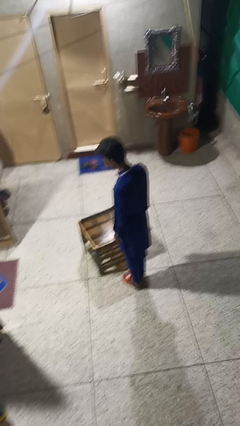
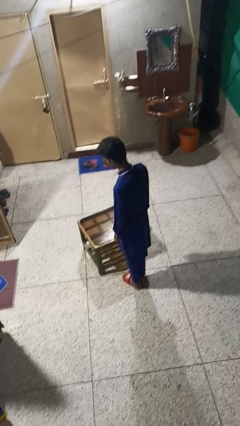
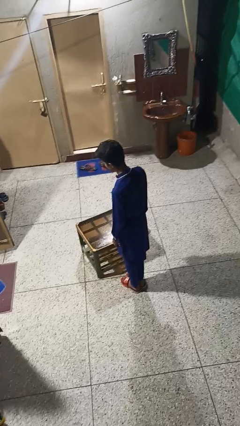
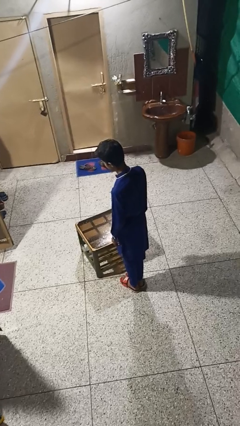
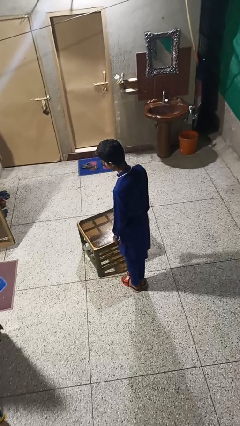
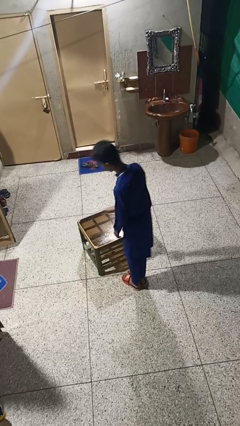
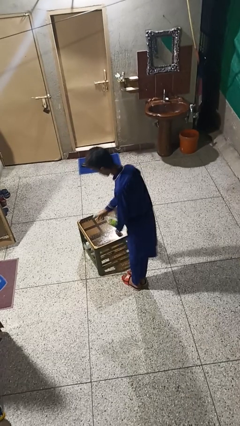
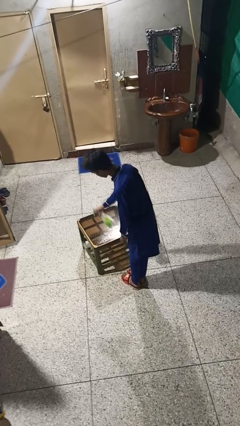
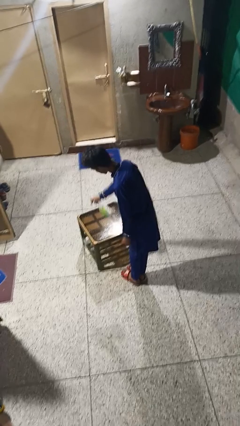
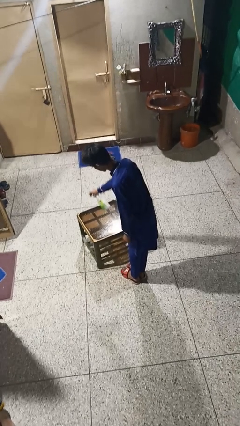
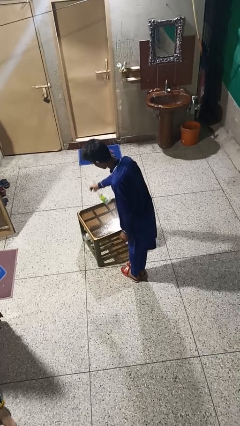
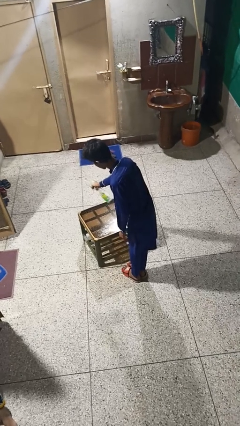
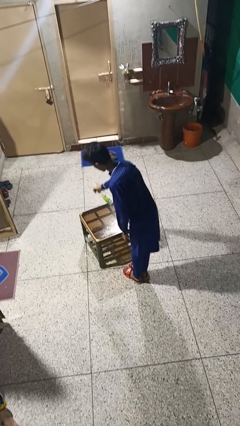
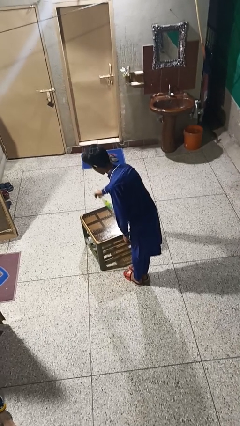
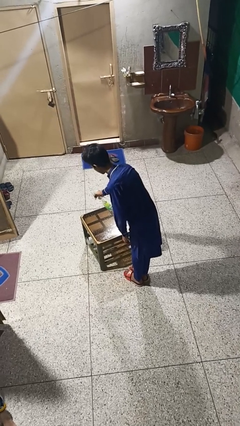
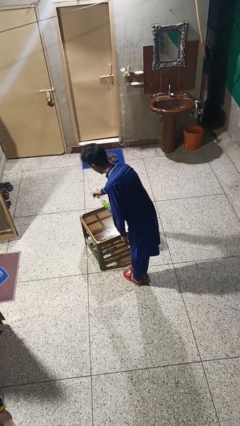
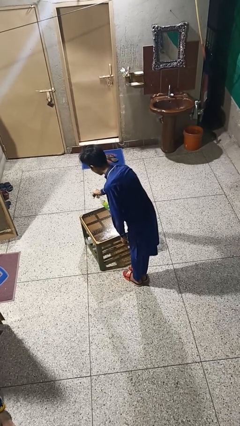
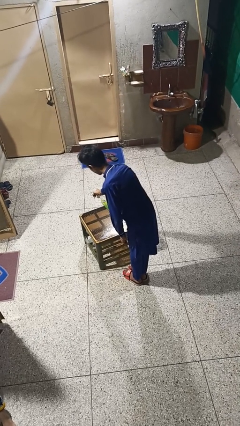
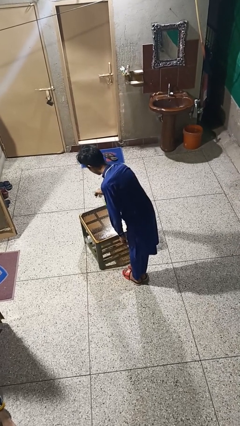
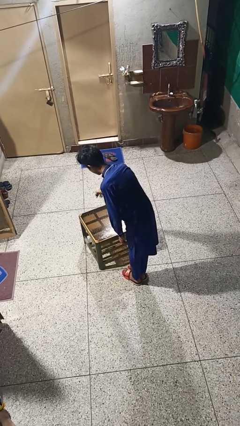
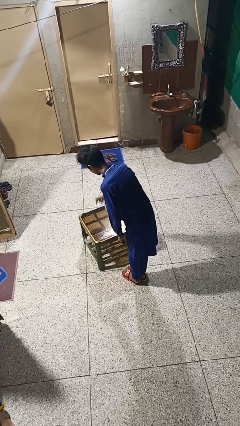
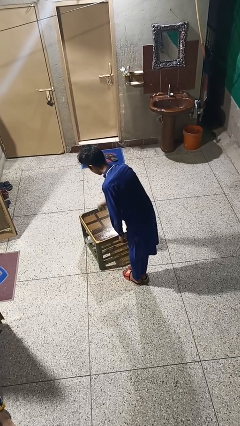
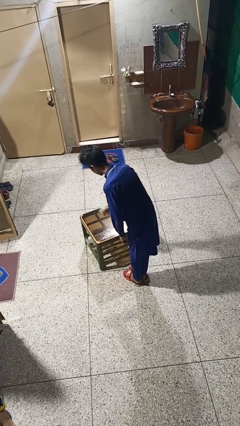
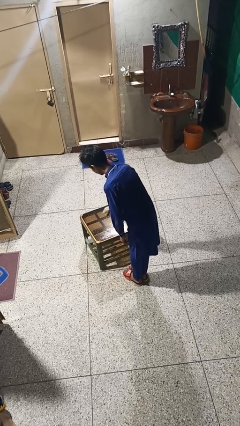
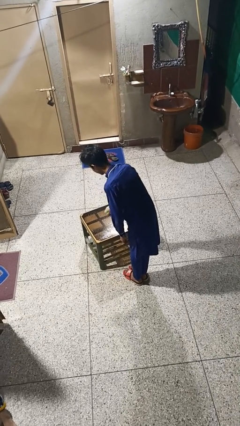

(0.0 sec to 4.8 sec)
person sprays from bottle

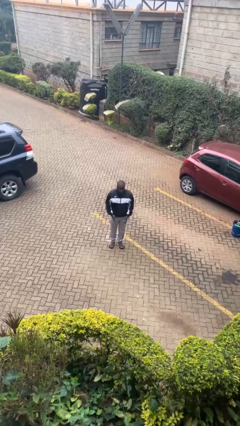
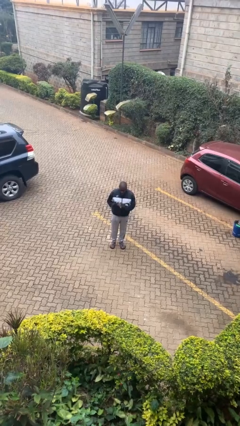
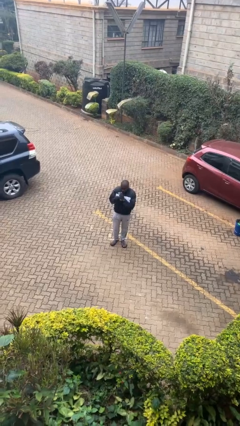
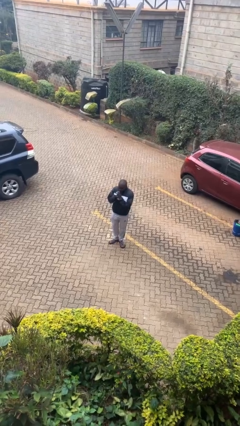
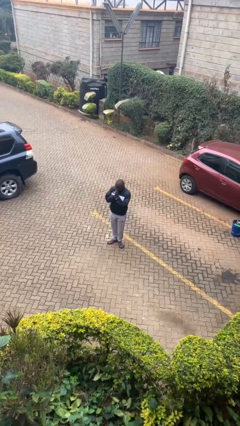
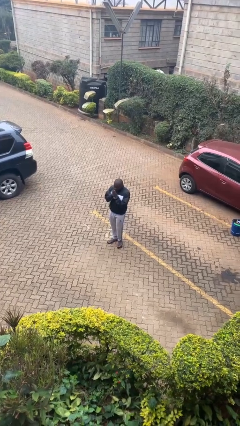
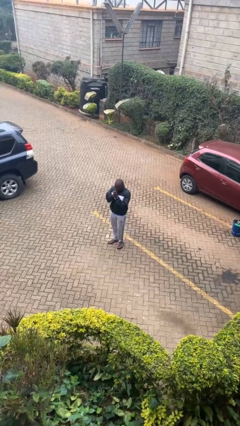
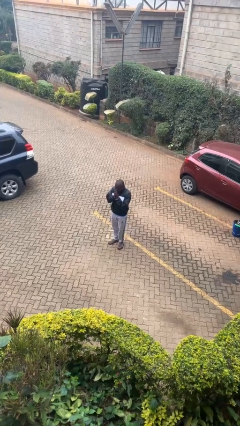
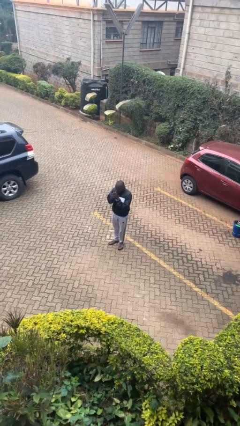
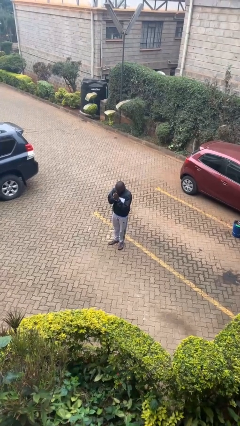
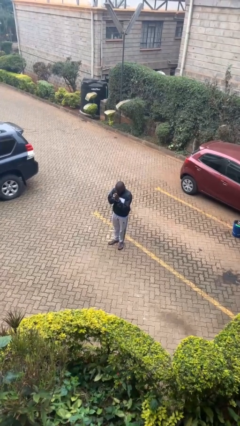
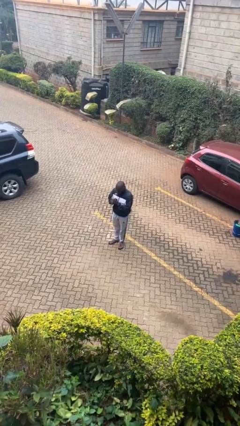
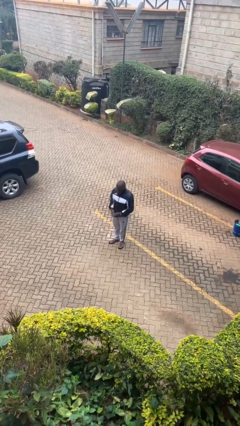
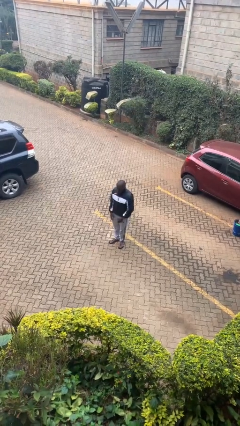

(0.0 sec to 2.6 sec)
person blows into hands

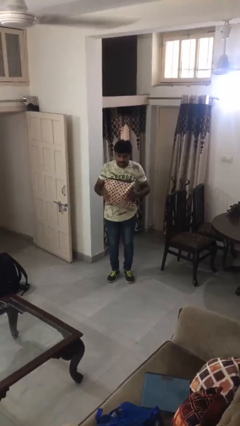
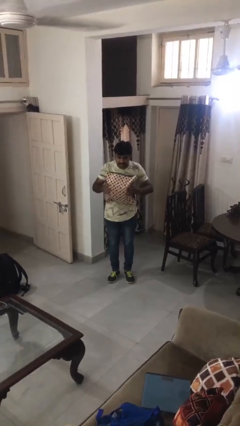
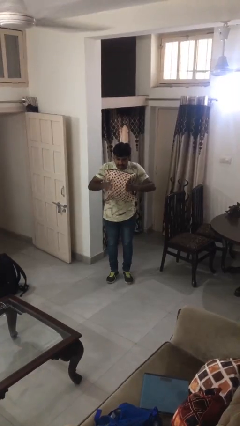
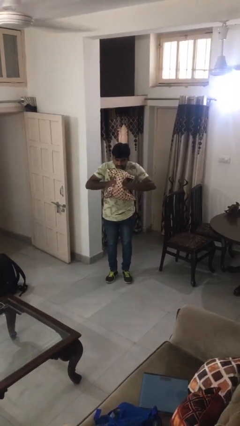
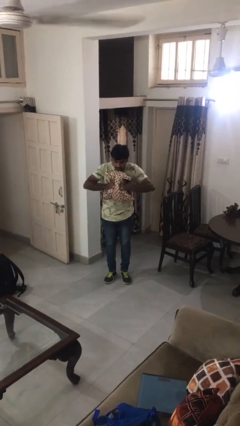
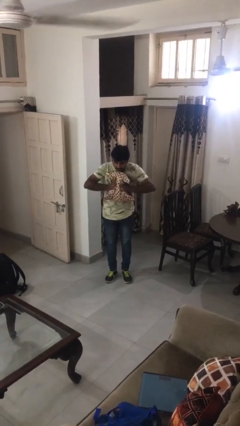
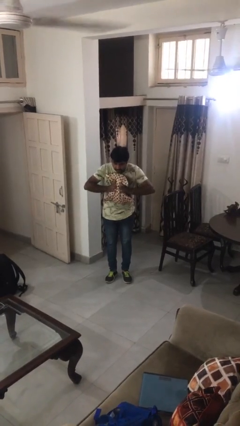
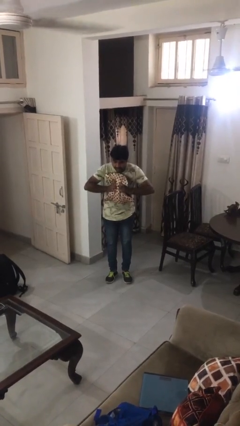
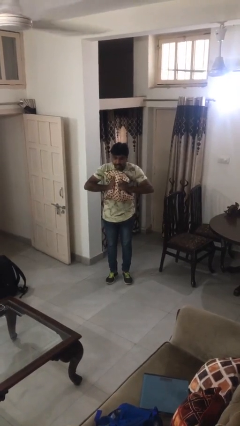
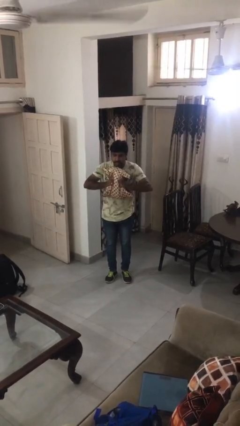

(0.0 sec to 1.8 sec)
person squeezes object

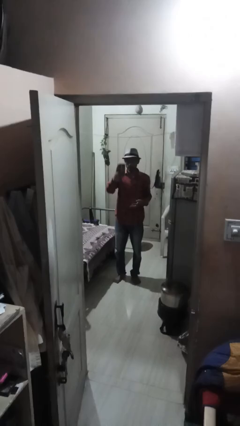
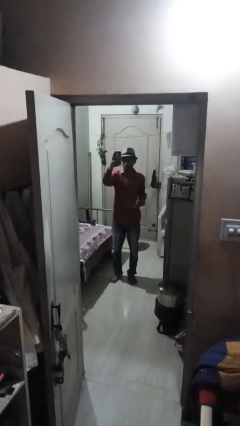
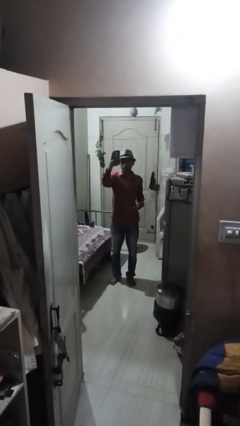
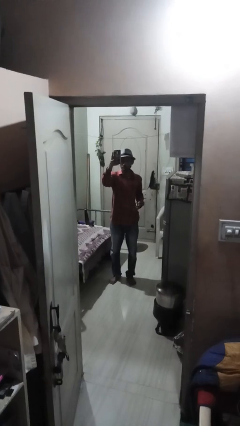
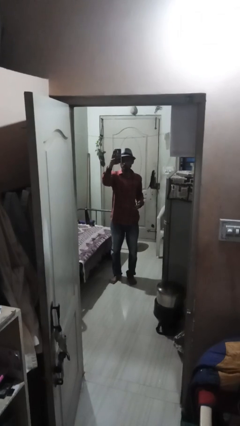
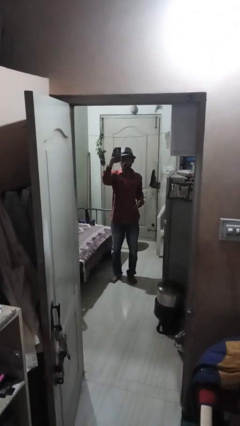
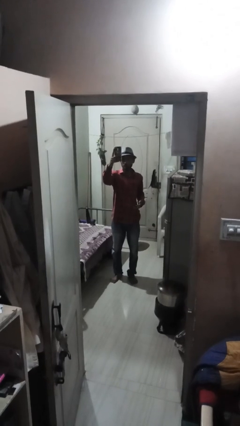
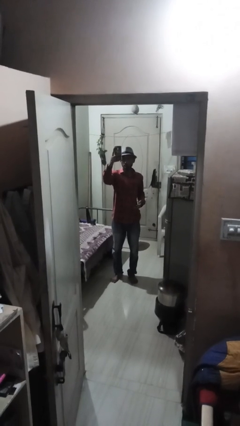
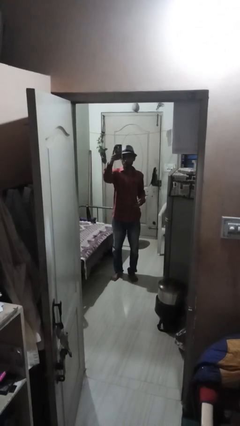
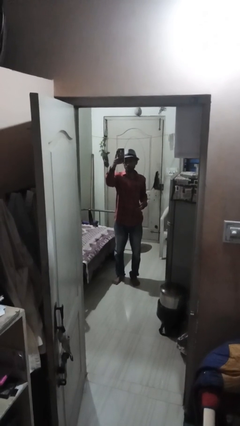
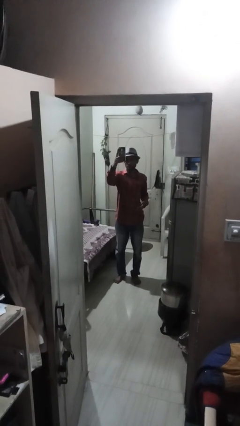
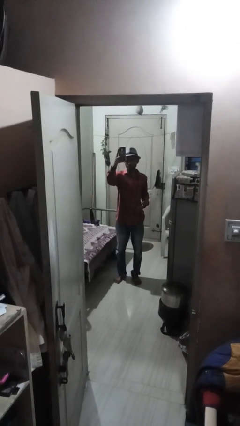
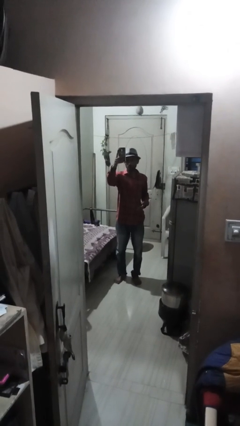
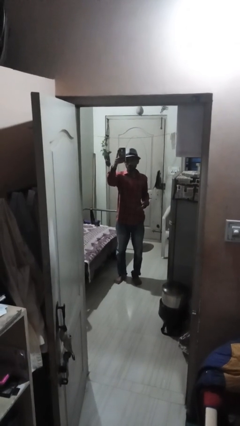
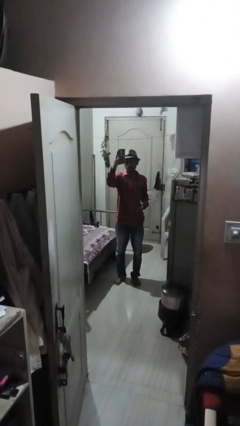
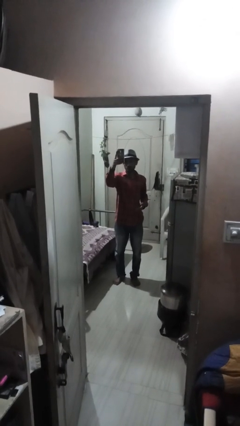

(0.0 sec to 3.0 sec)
person takes selfie

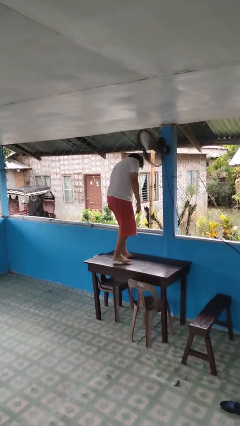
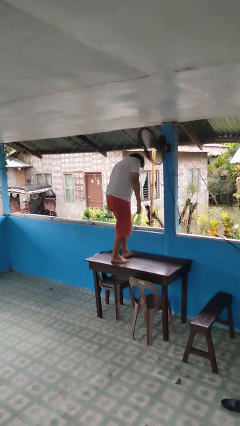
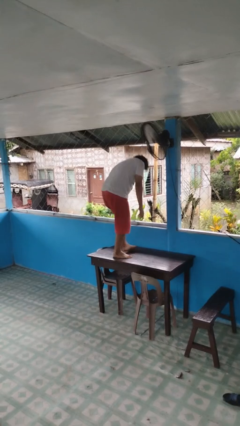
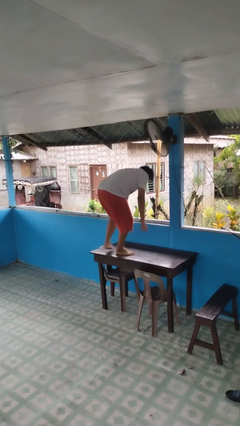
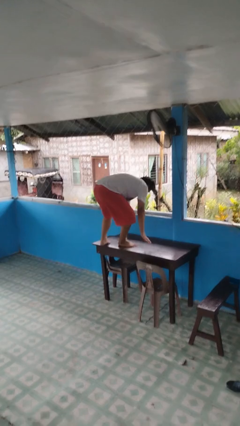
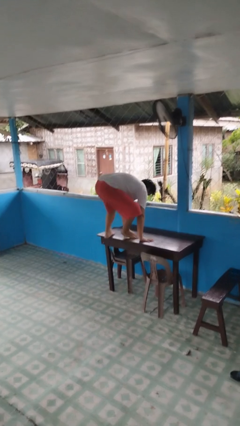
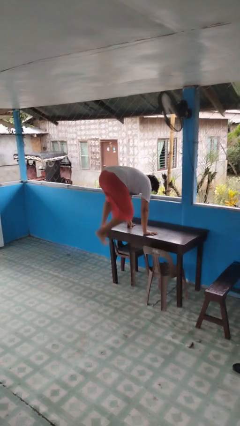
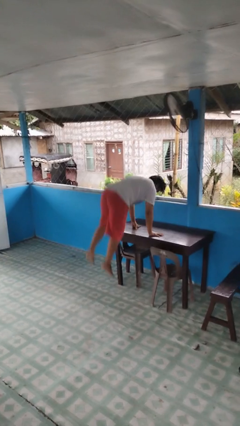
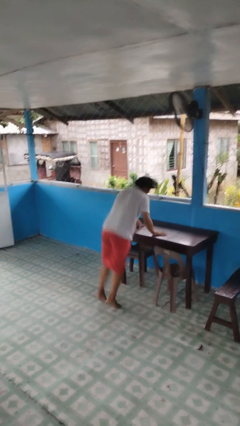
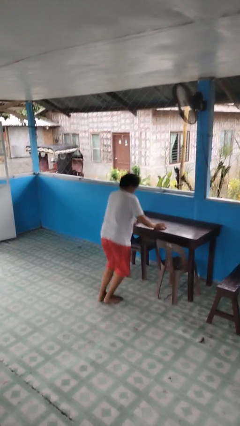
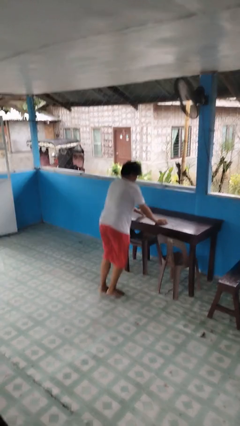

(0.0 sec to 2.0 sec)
person climbs off table

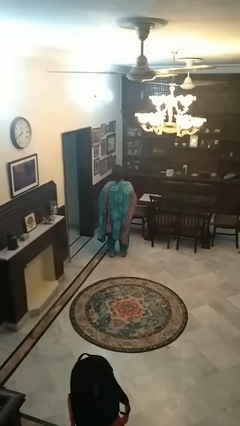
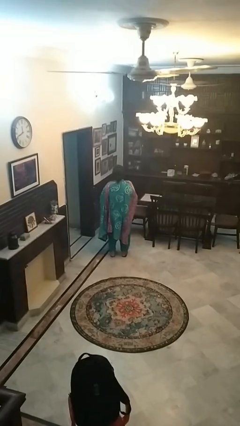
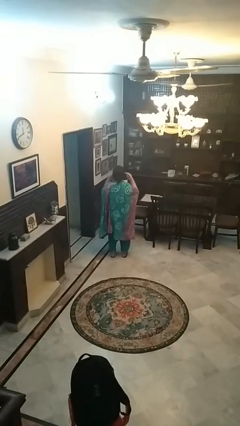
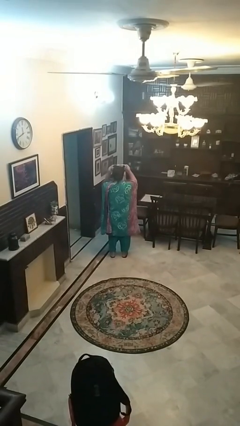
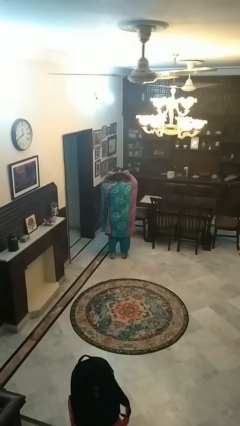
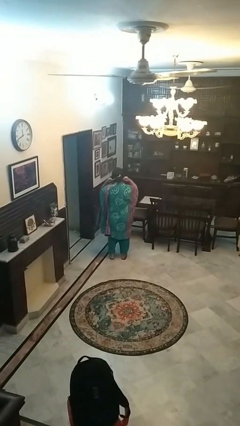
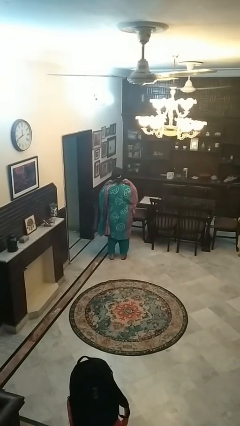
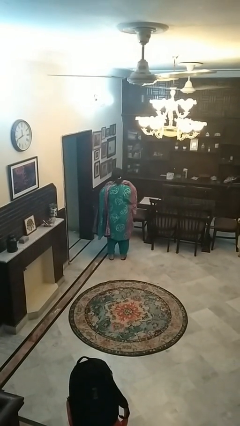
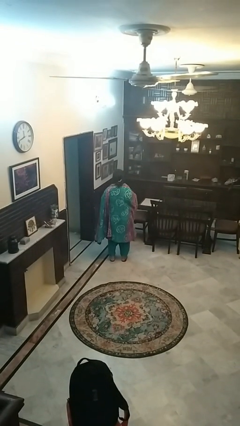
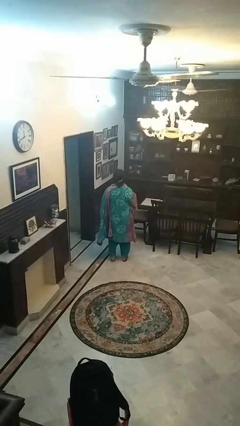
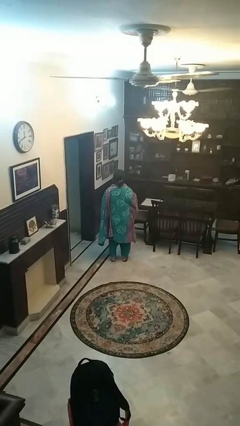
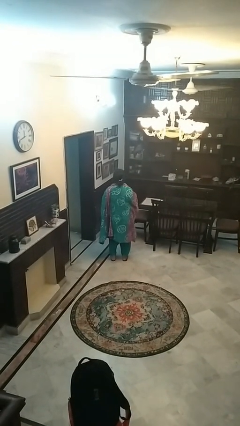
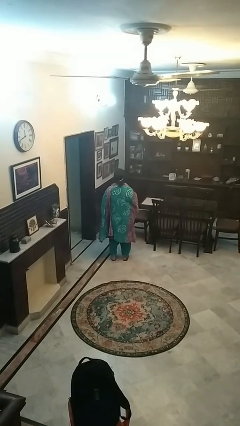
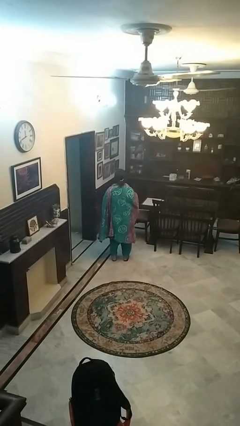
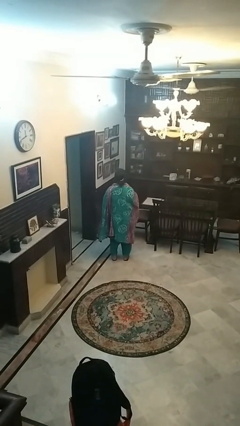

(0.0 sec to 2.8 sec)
person puts on apron

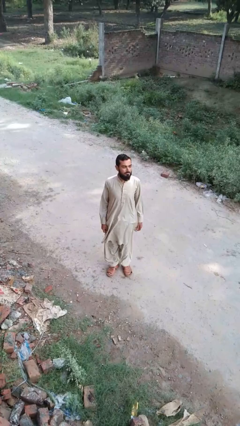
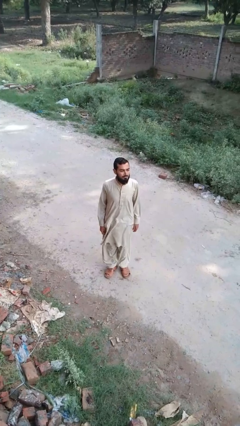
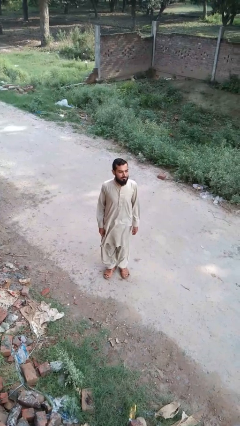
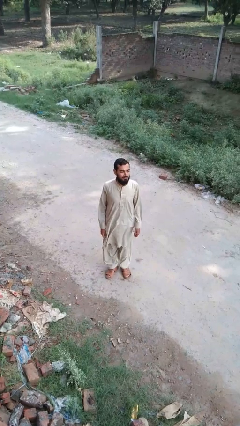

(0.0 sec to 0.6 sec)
person jumps
